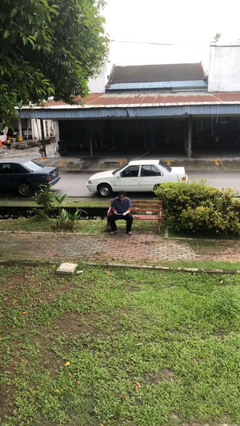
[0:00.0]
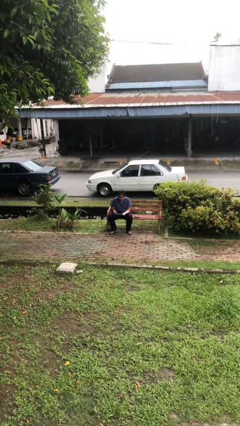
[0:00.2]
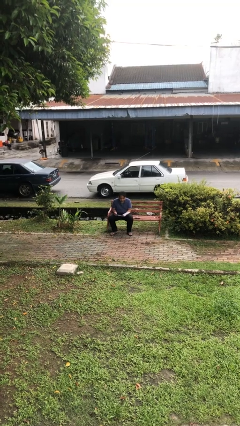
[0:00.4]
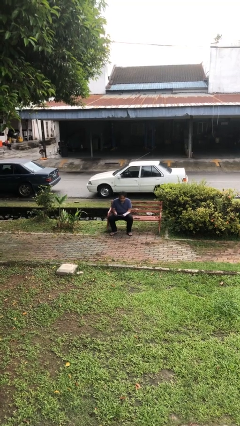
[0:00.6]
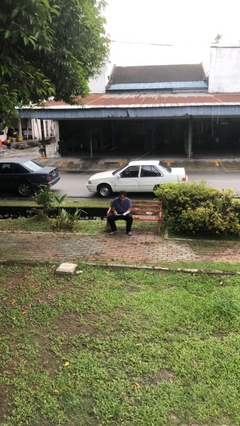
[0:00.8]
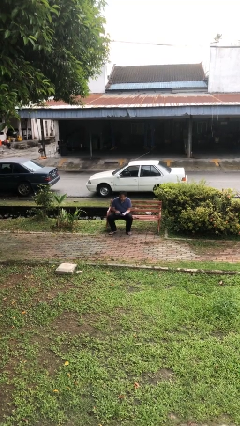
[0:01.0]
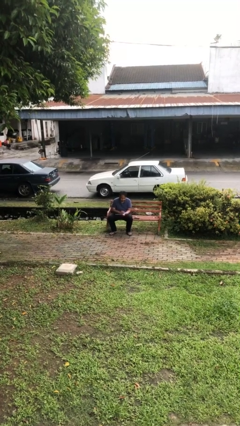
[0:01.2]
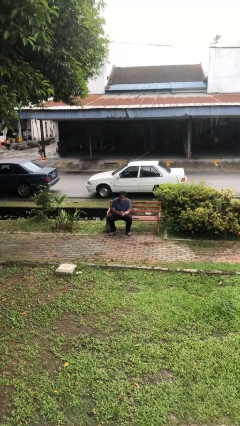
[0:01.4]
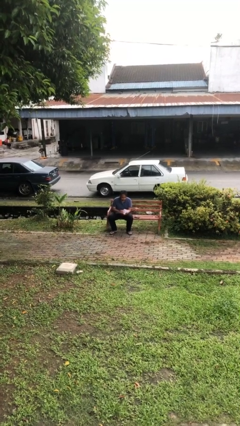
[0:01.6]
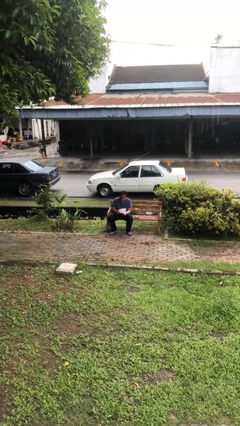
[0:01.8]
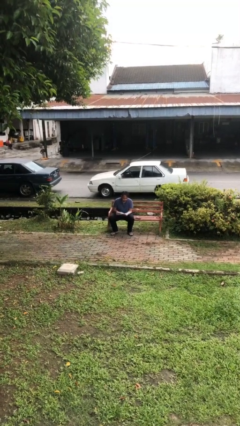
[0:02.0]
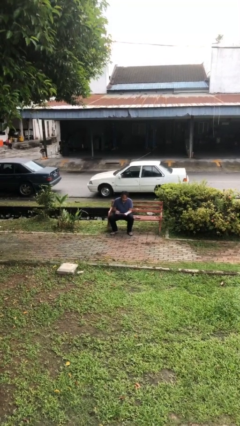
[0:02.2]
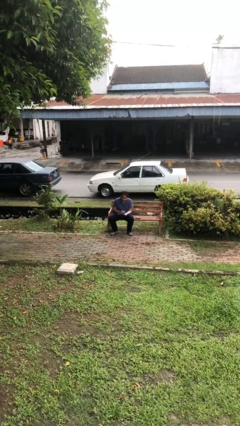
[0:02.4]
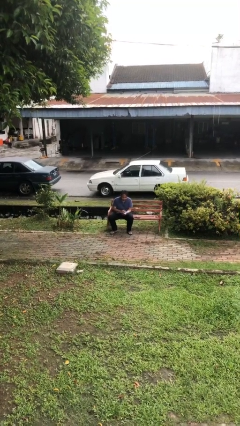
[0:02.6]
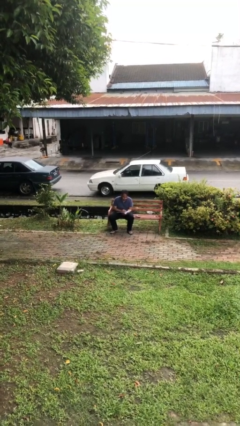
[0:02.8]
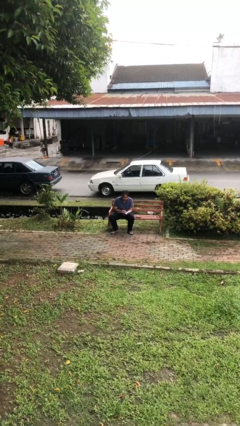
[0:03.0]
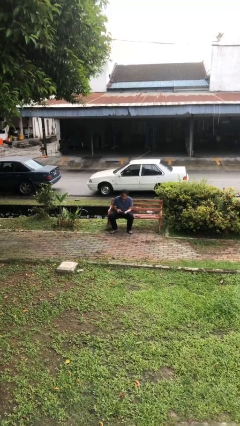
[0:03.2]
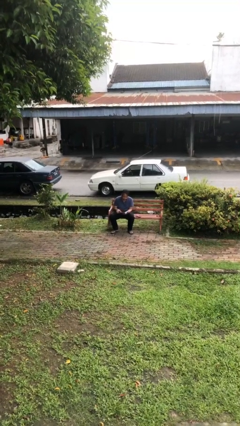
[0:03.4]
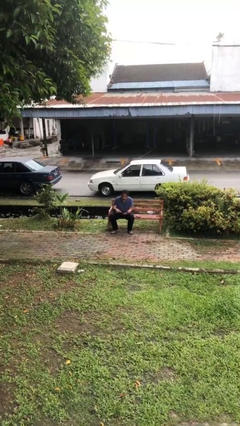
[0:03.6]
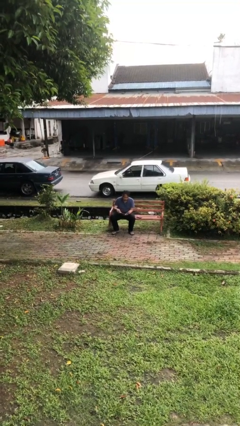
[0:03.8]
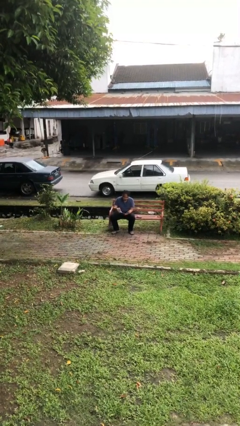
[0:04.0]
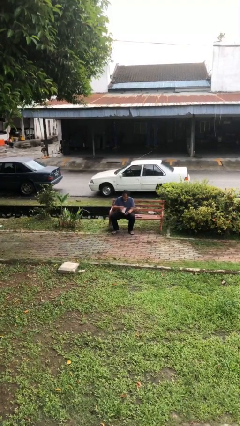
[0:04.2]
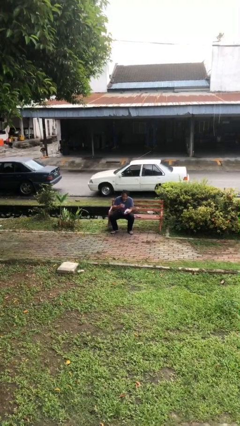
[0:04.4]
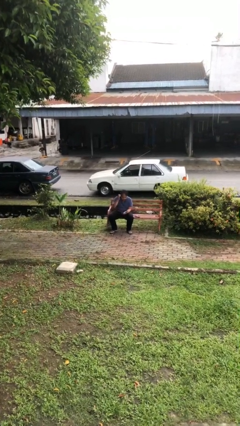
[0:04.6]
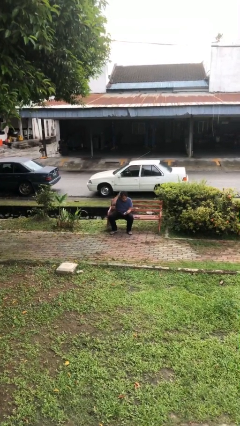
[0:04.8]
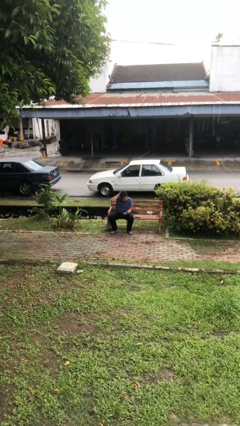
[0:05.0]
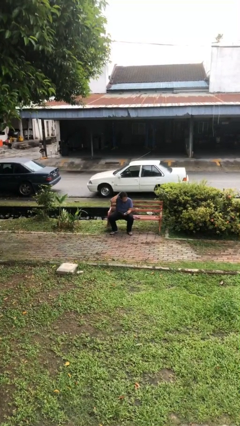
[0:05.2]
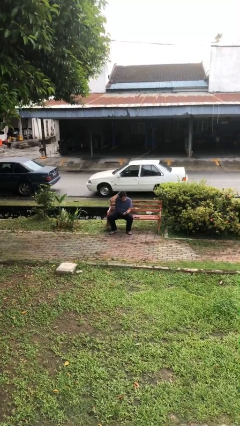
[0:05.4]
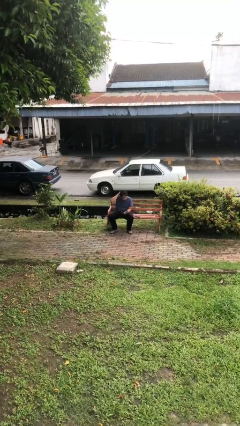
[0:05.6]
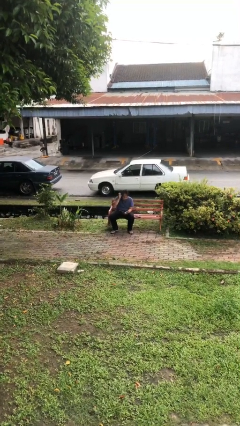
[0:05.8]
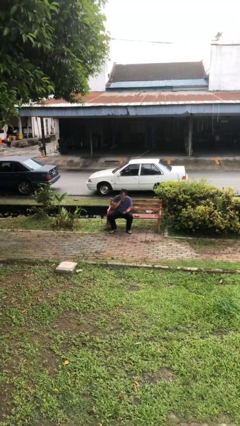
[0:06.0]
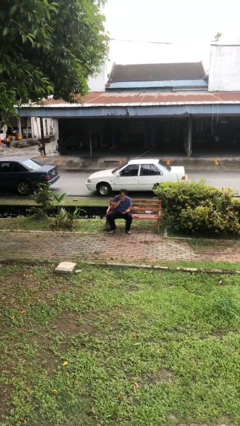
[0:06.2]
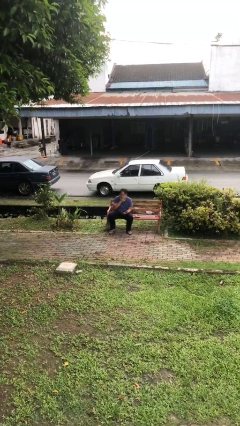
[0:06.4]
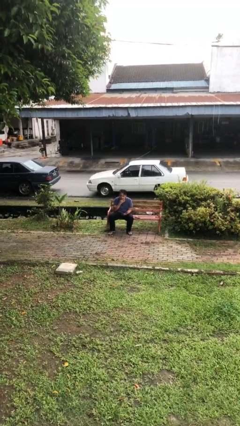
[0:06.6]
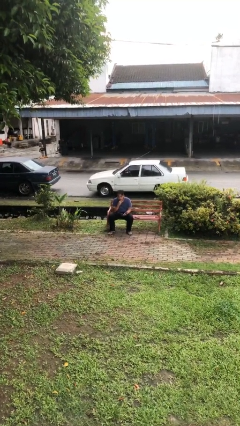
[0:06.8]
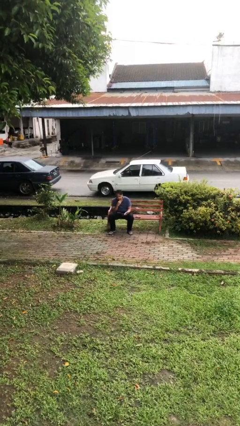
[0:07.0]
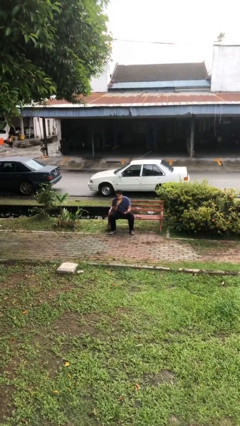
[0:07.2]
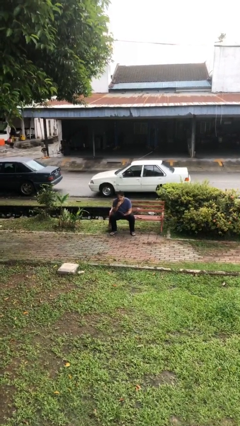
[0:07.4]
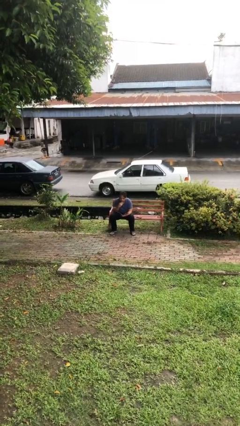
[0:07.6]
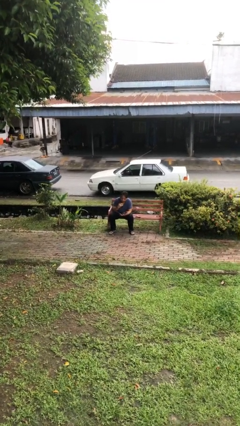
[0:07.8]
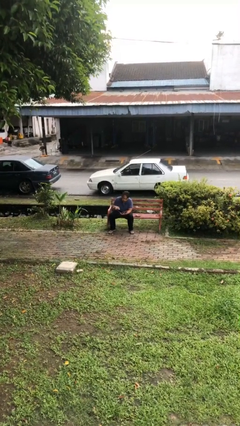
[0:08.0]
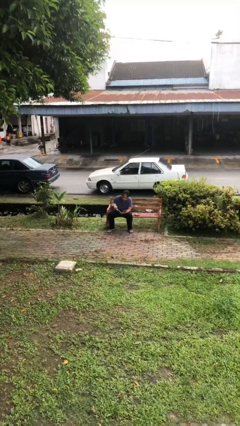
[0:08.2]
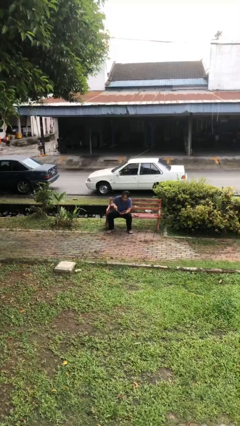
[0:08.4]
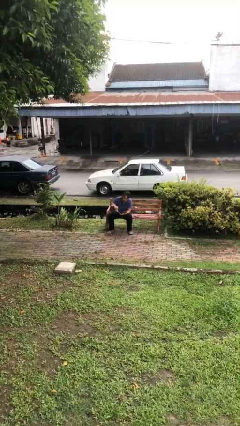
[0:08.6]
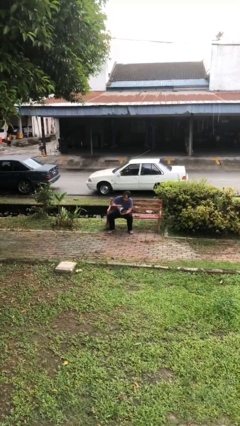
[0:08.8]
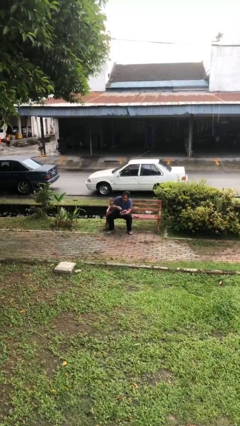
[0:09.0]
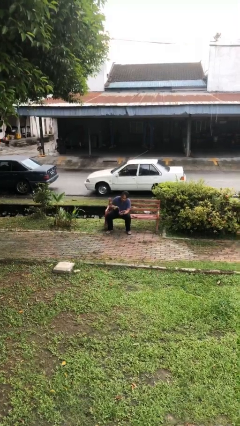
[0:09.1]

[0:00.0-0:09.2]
person reads document

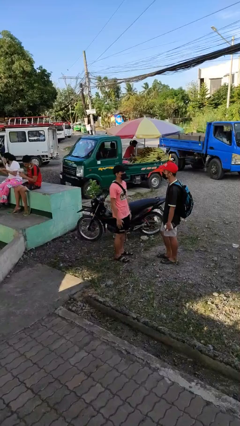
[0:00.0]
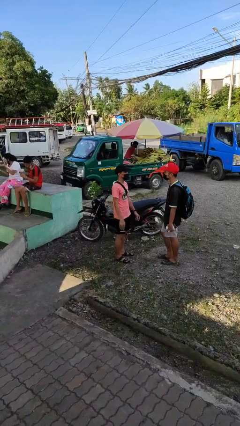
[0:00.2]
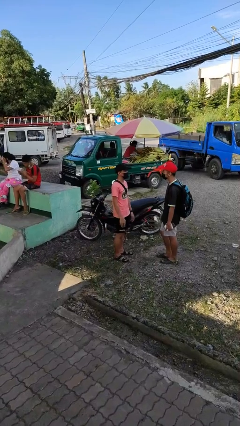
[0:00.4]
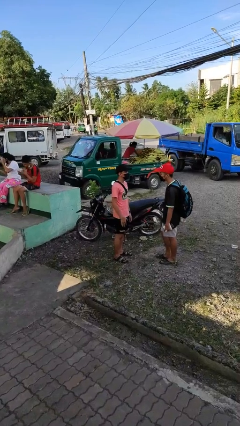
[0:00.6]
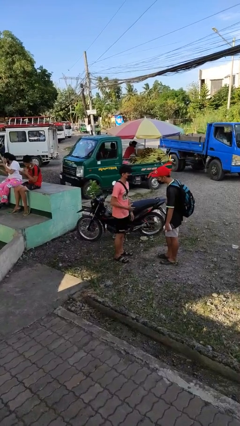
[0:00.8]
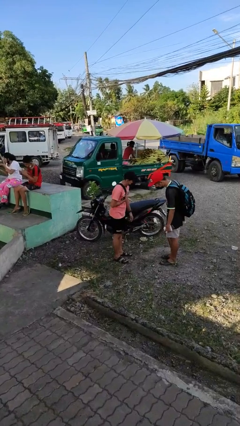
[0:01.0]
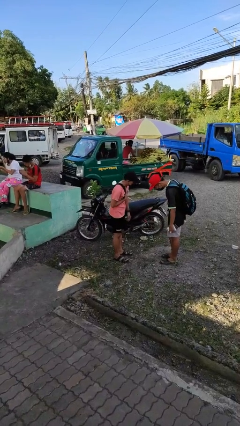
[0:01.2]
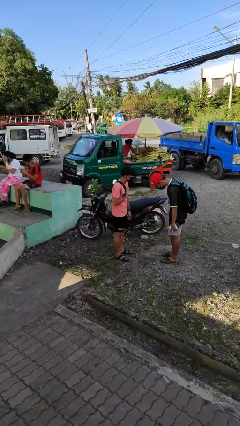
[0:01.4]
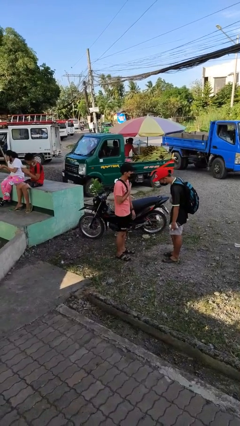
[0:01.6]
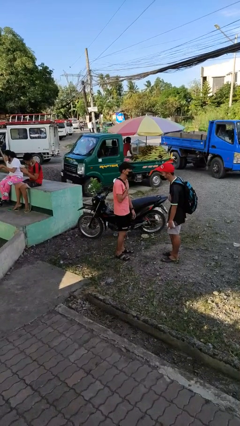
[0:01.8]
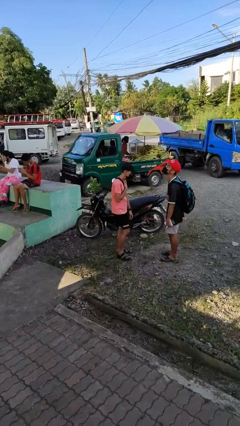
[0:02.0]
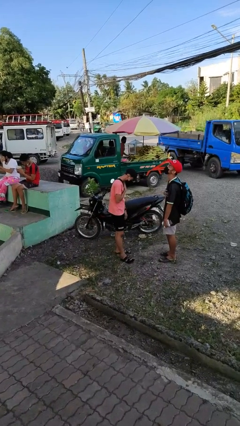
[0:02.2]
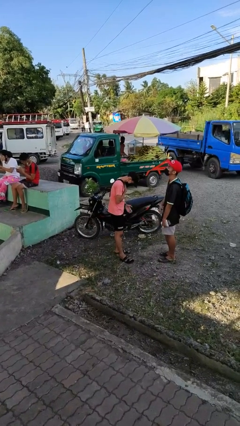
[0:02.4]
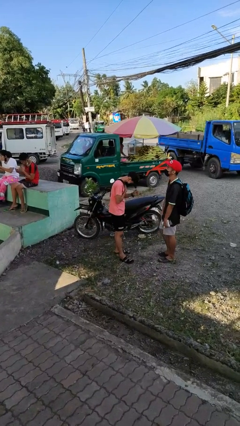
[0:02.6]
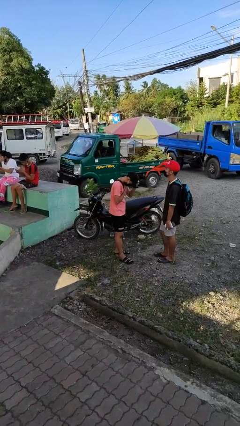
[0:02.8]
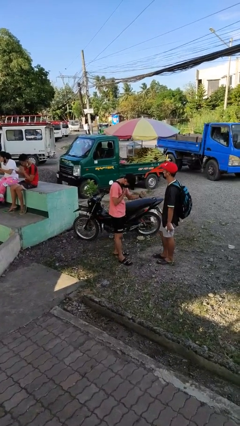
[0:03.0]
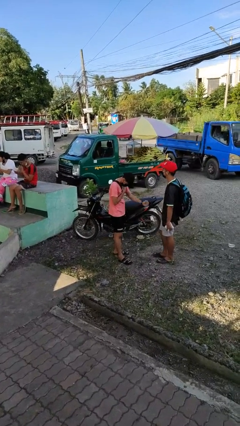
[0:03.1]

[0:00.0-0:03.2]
person laughs with person

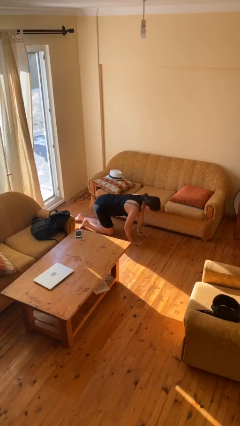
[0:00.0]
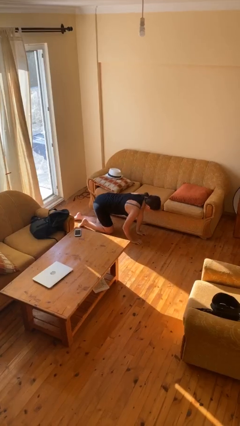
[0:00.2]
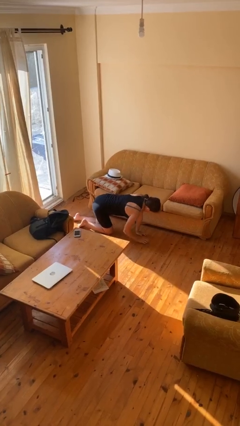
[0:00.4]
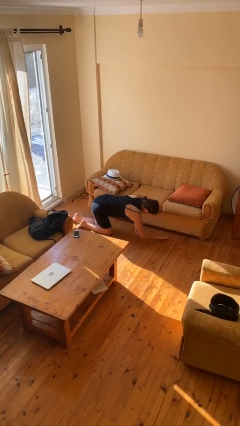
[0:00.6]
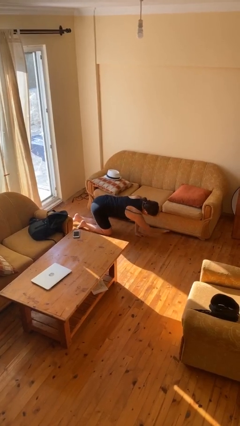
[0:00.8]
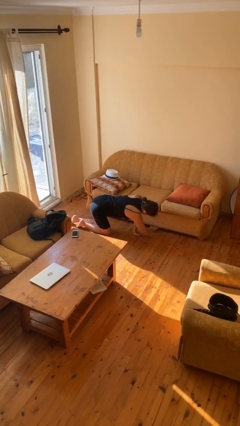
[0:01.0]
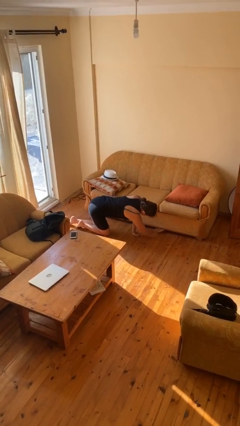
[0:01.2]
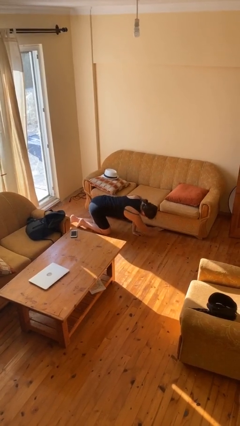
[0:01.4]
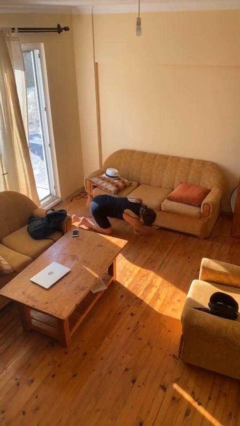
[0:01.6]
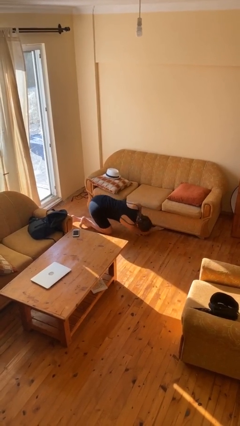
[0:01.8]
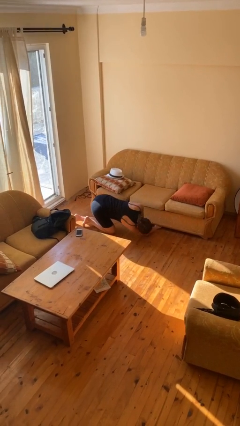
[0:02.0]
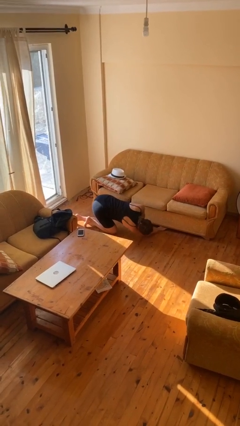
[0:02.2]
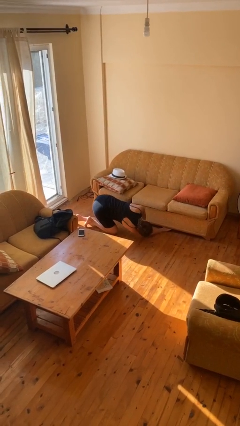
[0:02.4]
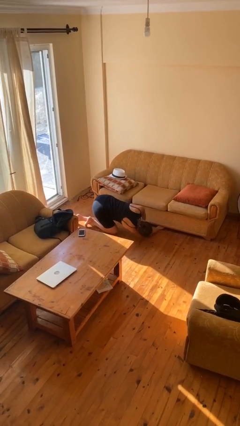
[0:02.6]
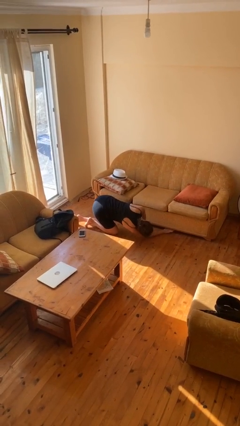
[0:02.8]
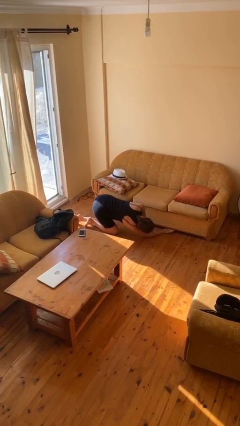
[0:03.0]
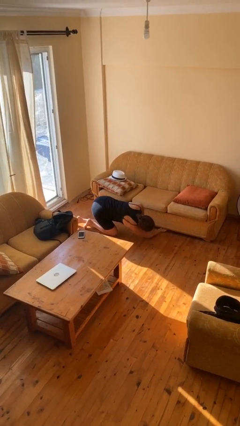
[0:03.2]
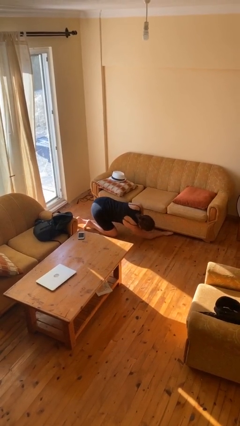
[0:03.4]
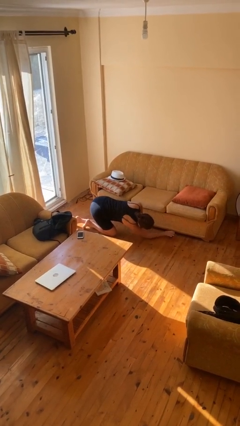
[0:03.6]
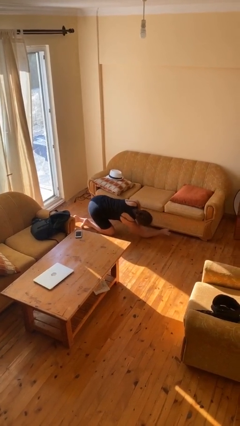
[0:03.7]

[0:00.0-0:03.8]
person searches under couch

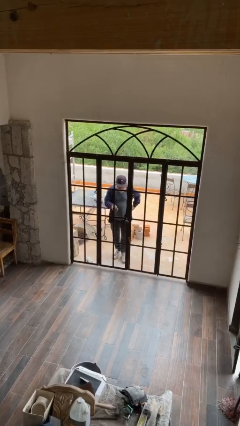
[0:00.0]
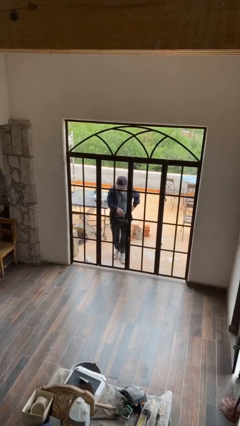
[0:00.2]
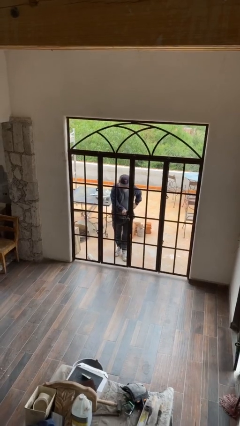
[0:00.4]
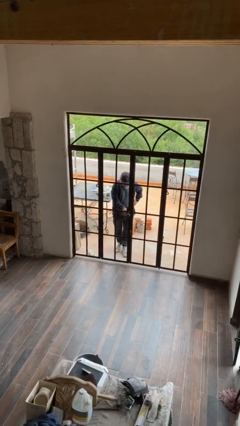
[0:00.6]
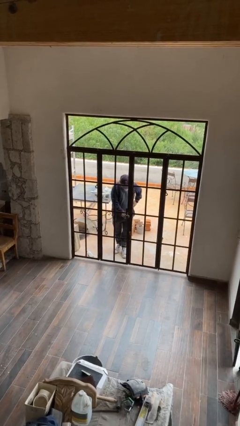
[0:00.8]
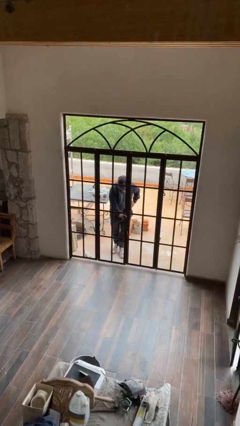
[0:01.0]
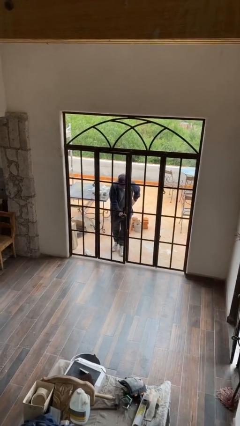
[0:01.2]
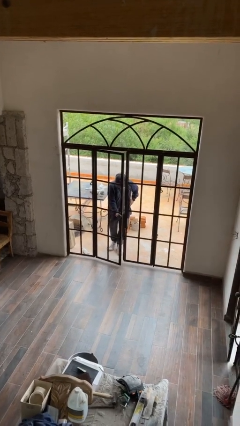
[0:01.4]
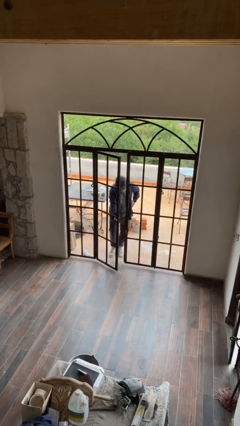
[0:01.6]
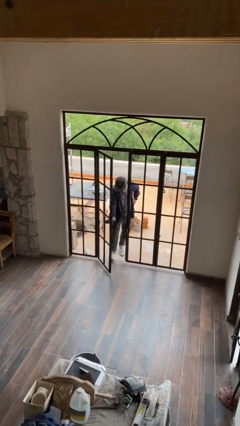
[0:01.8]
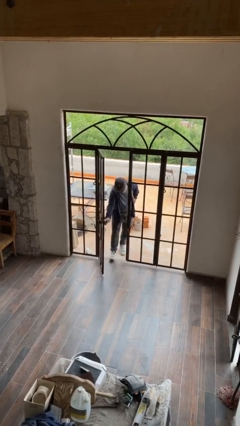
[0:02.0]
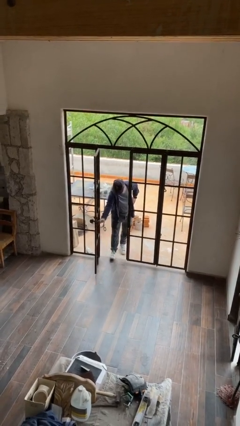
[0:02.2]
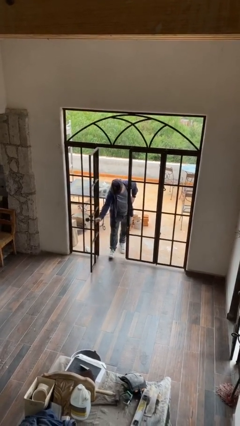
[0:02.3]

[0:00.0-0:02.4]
person opens facility door
